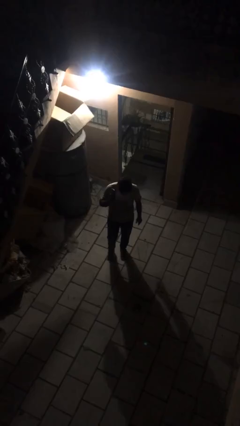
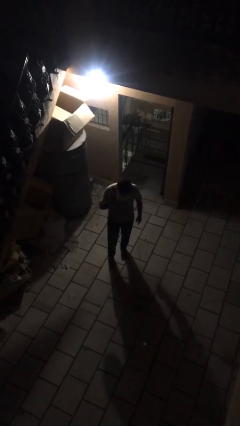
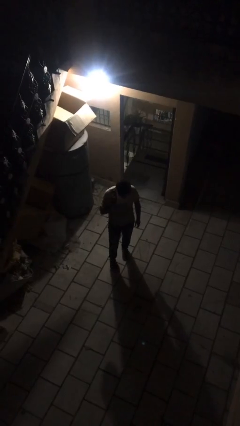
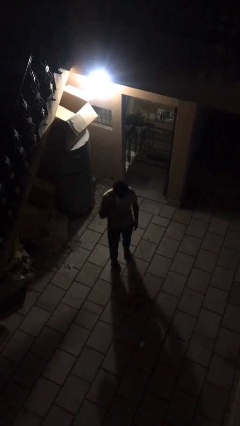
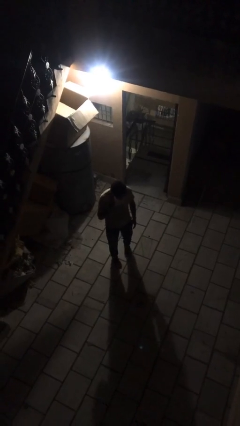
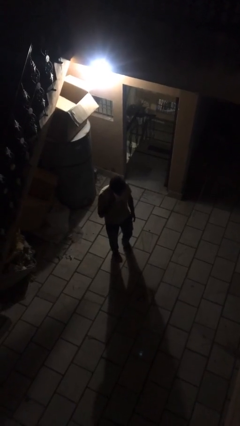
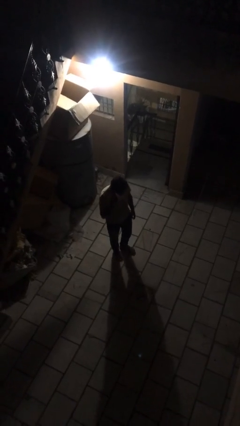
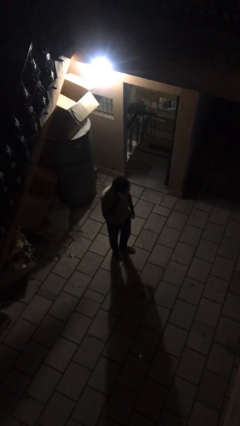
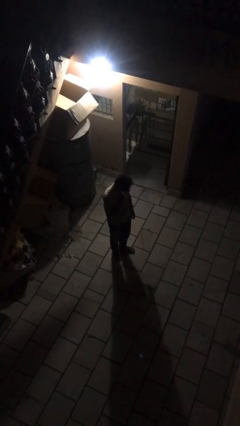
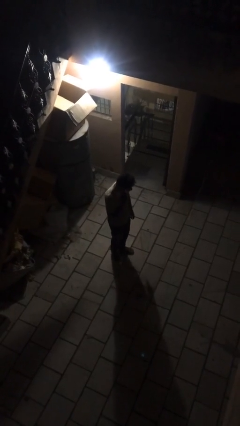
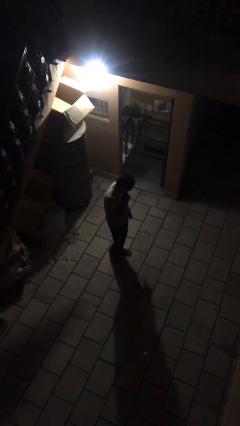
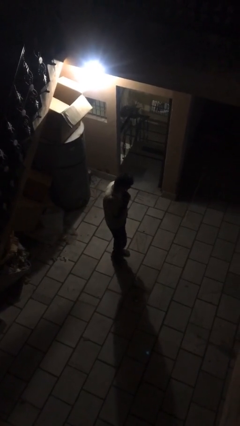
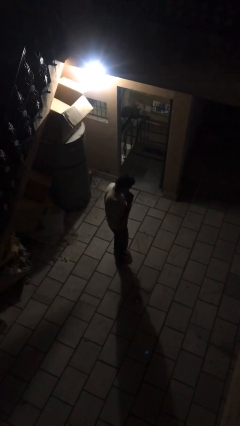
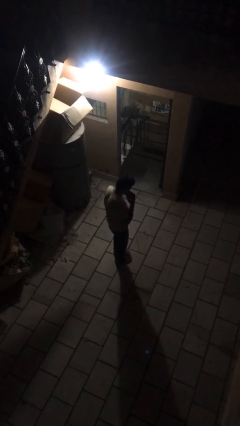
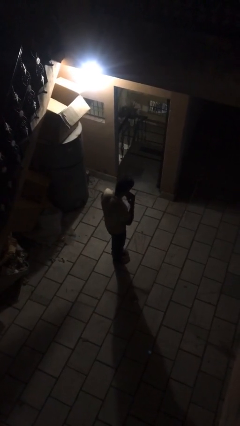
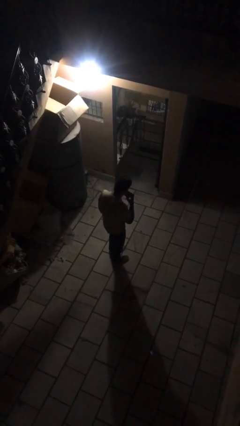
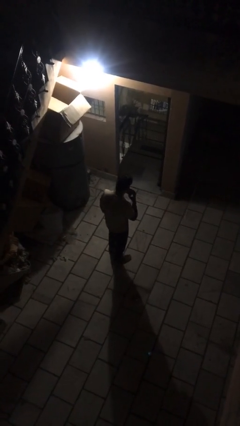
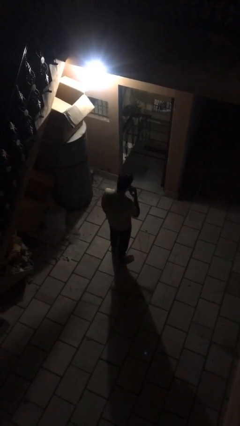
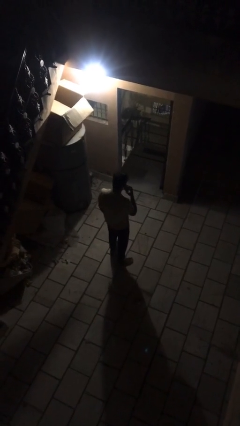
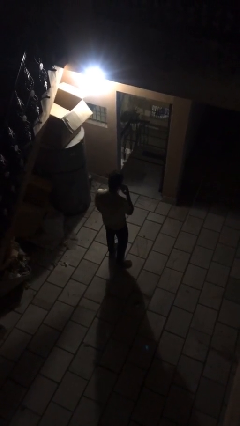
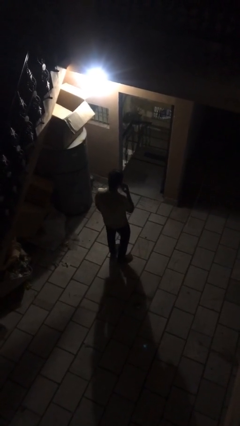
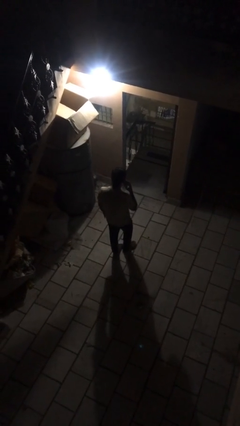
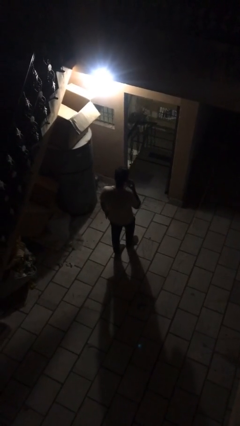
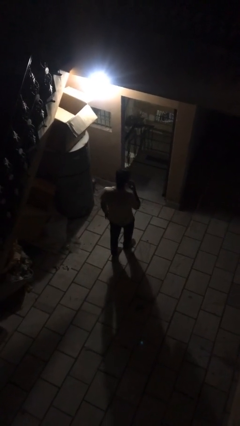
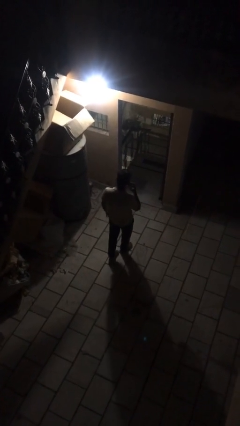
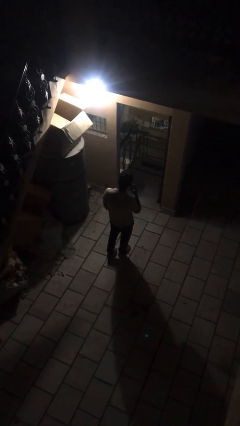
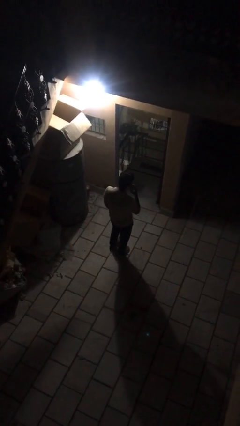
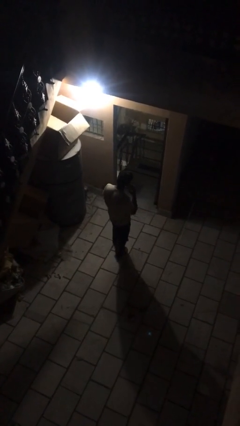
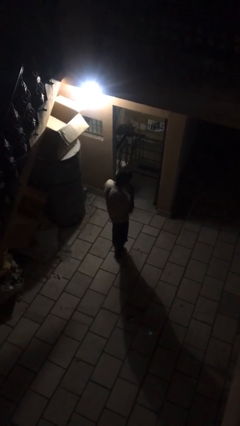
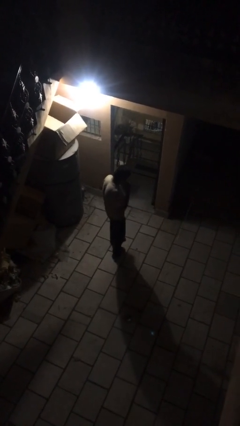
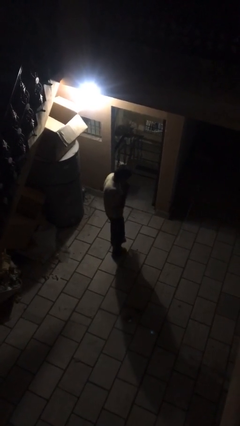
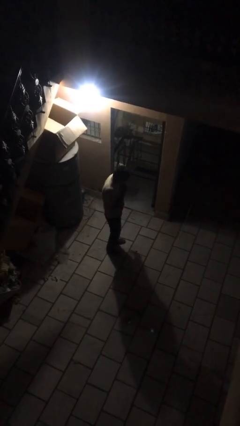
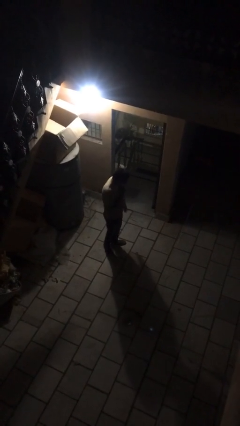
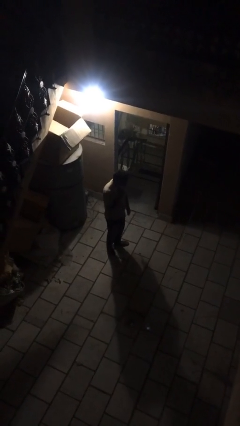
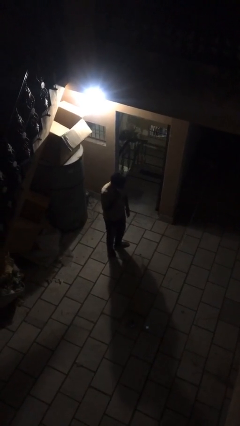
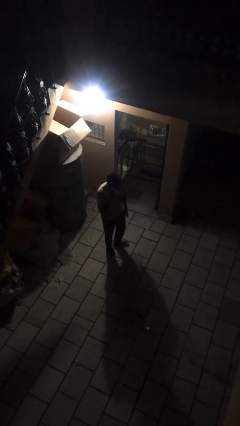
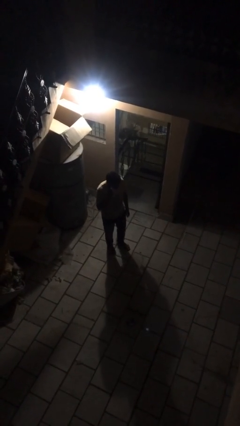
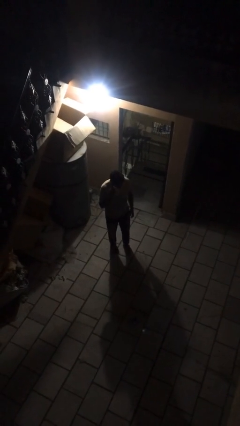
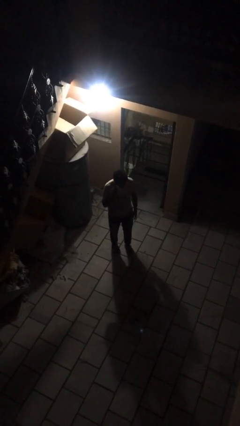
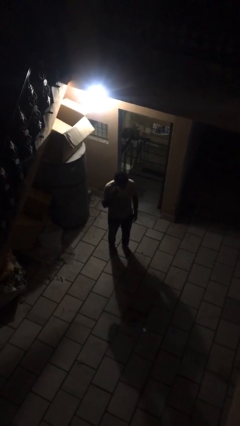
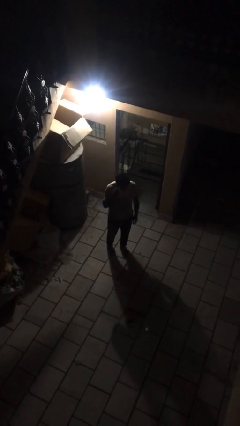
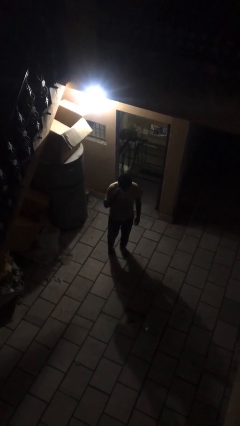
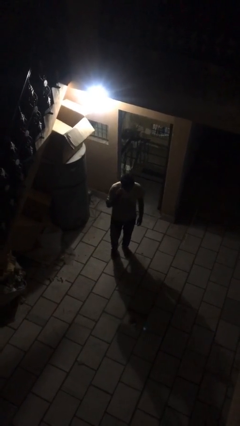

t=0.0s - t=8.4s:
person talks on phone

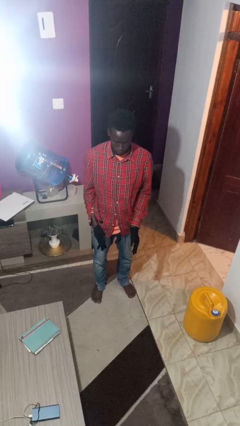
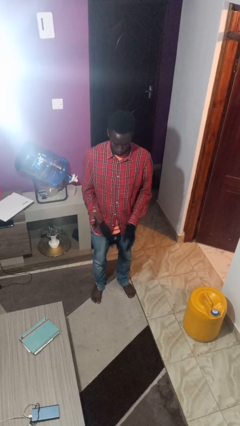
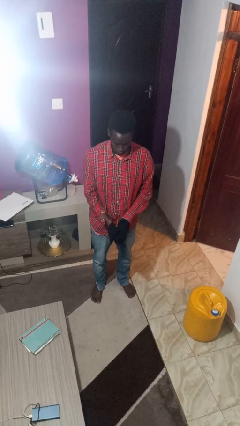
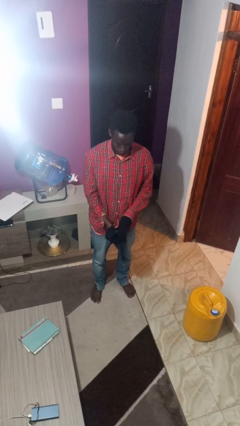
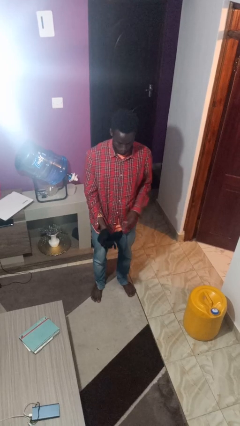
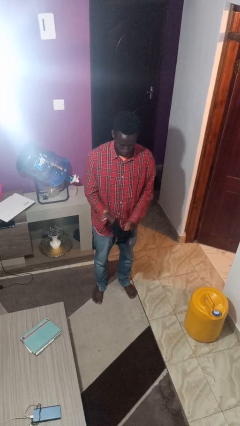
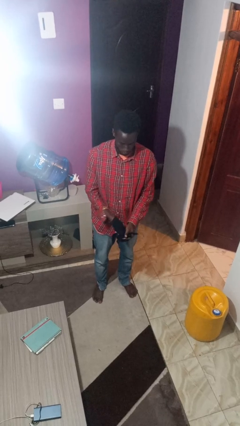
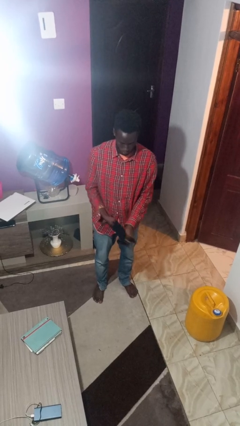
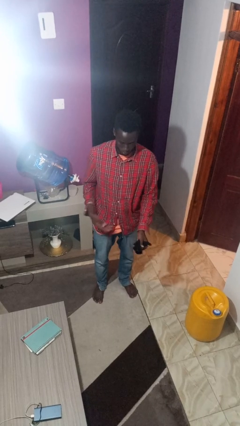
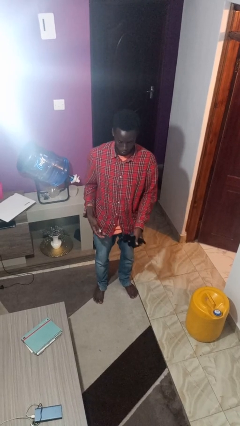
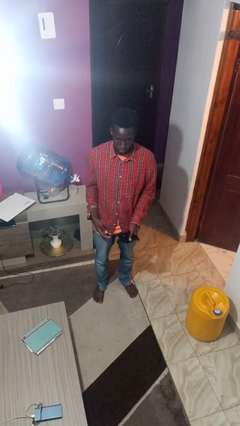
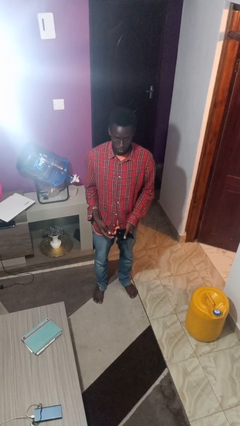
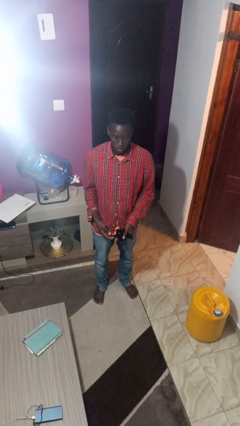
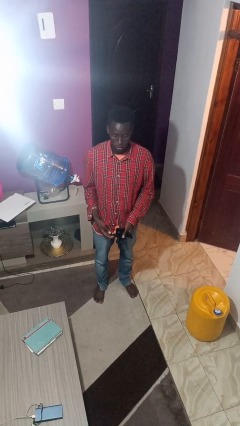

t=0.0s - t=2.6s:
person takes off gloves

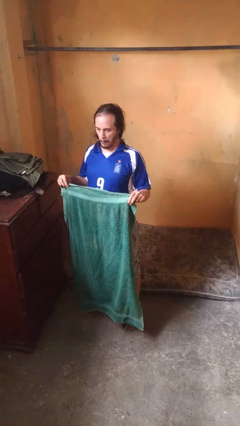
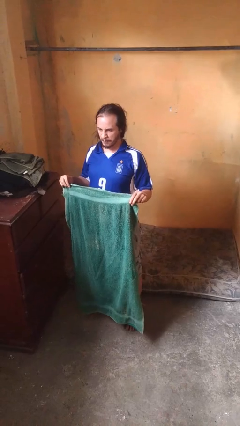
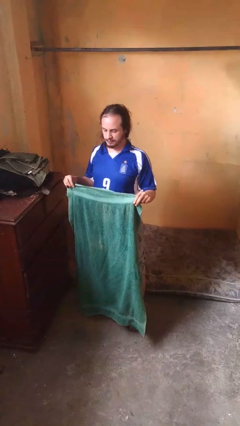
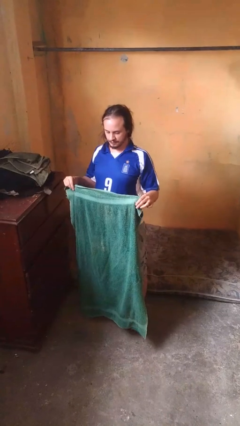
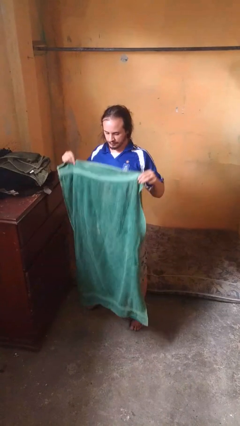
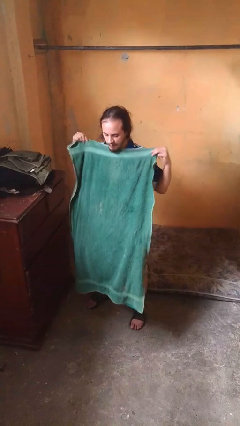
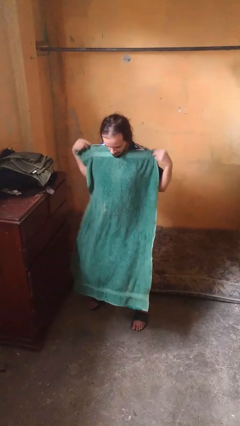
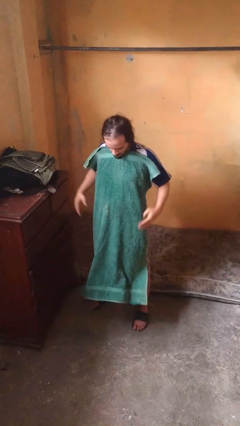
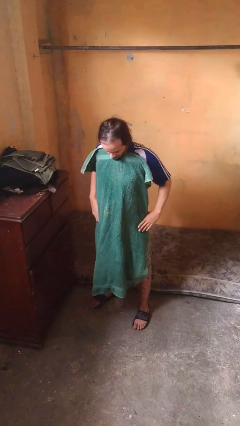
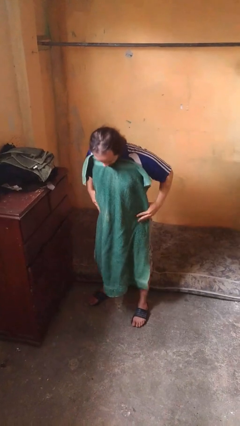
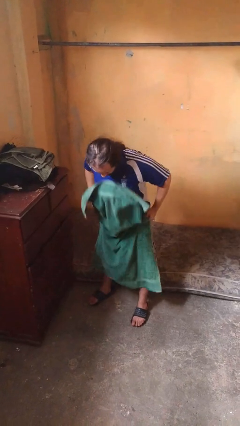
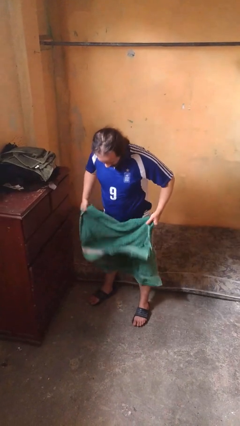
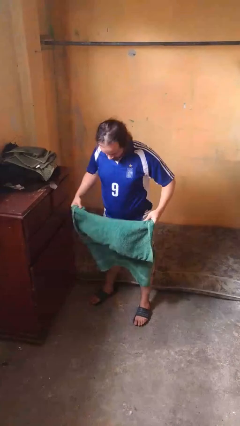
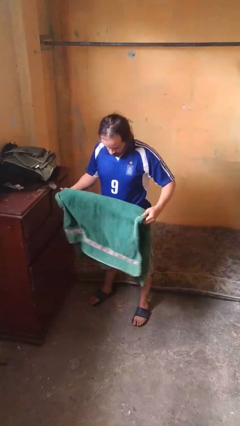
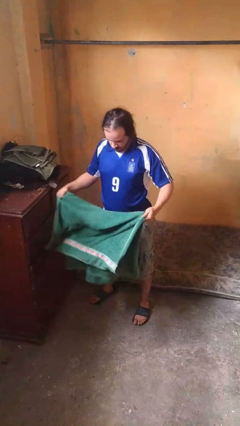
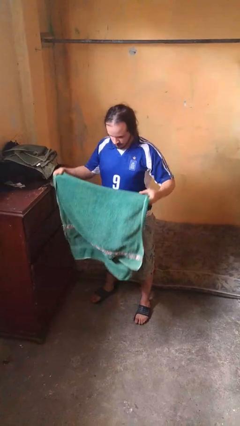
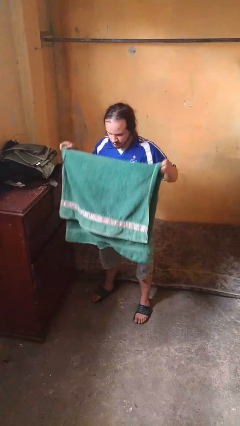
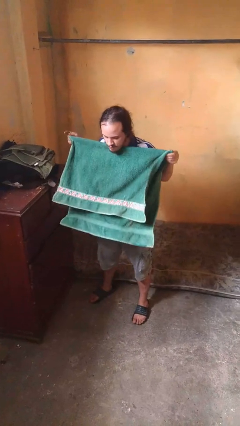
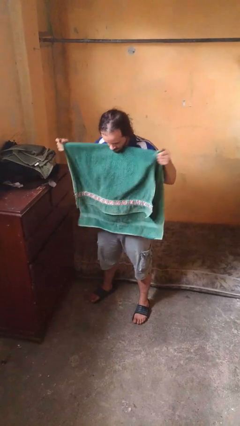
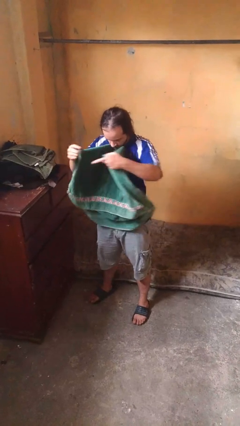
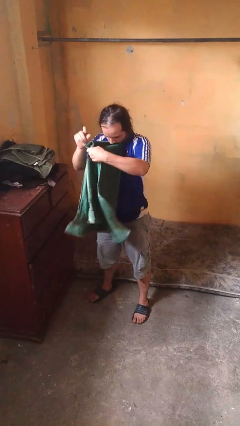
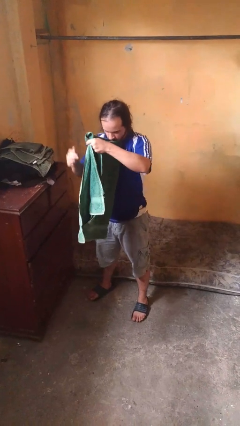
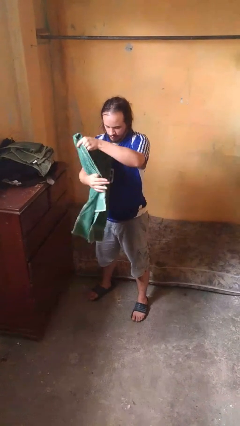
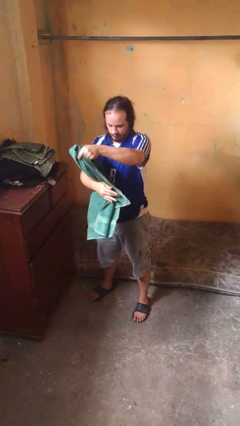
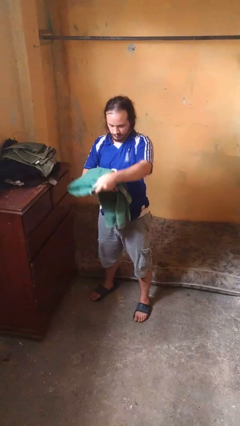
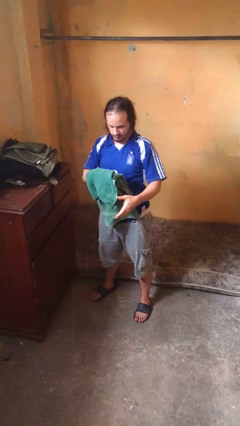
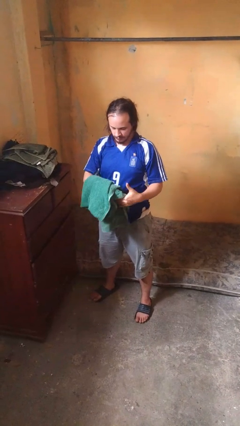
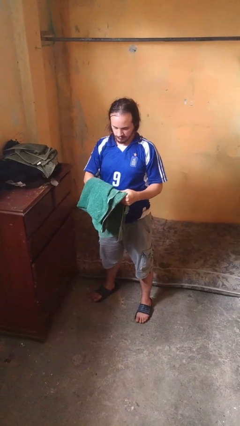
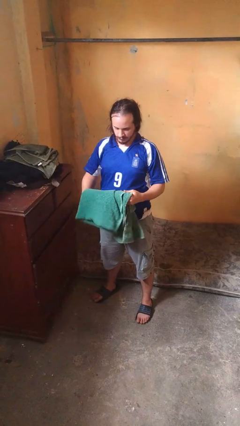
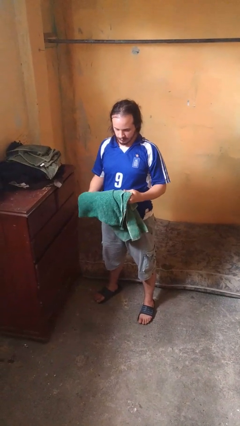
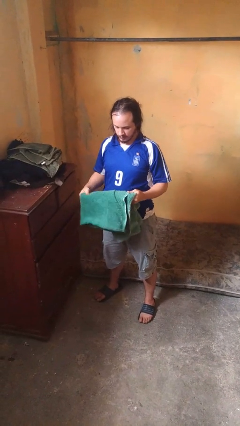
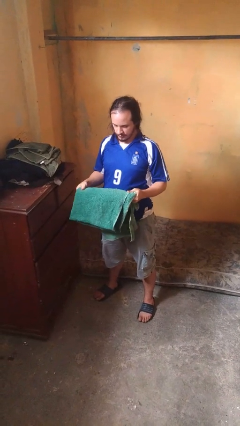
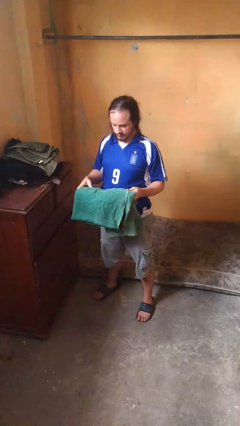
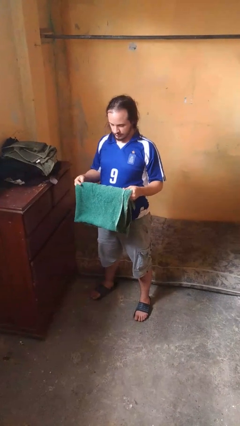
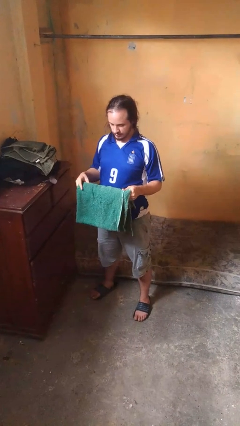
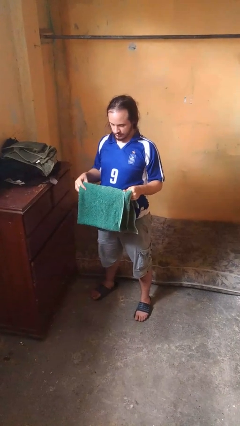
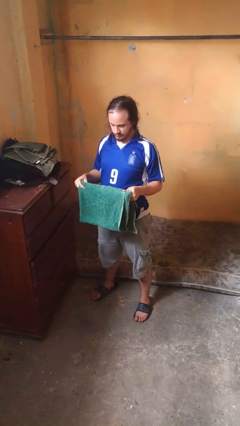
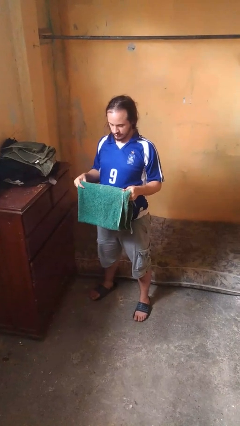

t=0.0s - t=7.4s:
person folds blanket
